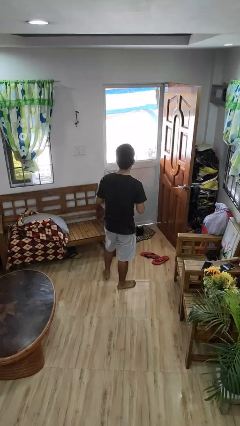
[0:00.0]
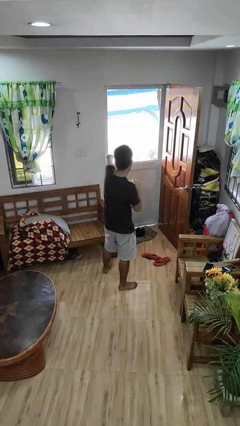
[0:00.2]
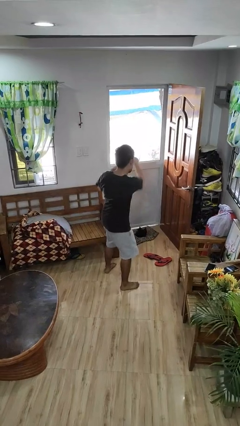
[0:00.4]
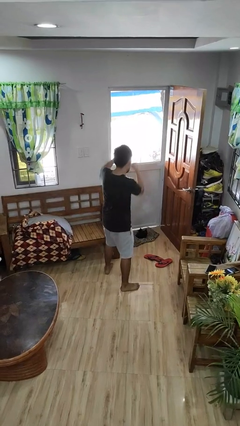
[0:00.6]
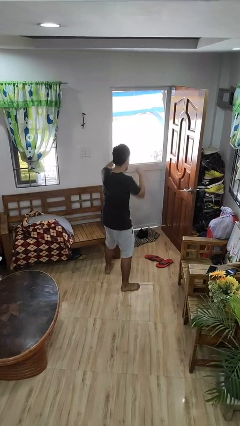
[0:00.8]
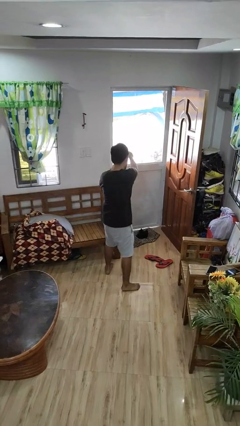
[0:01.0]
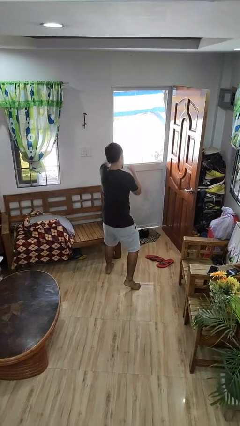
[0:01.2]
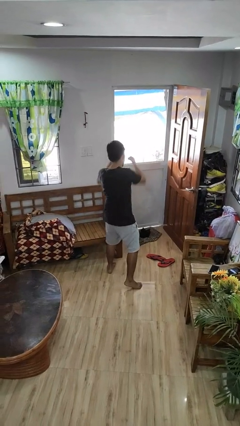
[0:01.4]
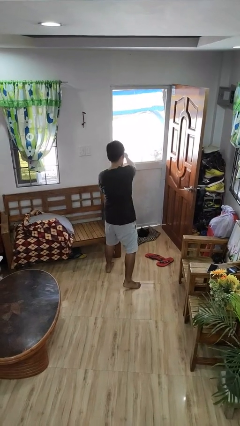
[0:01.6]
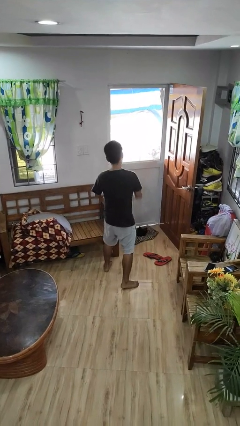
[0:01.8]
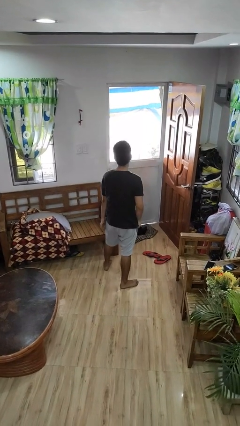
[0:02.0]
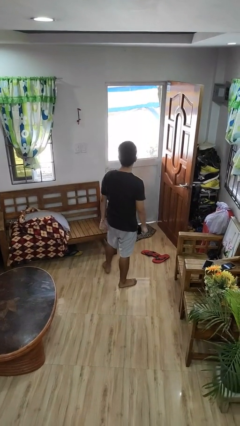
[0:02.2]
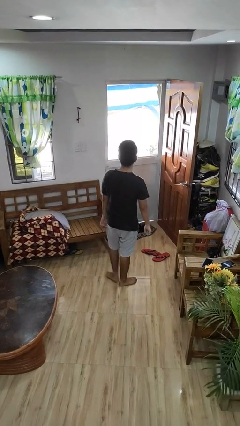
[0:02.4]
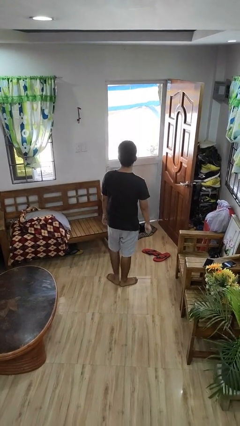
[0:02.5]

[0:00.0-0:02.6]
person punches

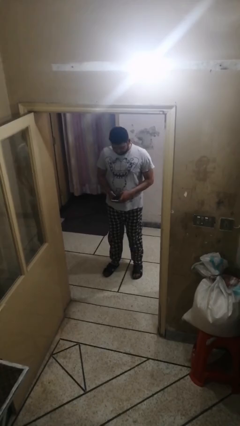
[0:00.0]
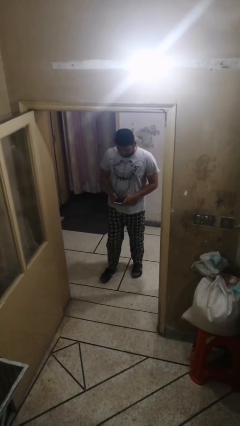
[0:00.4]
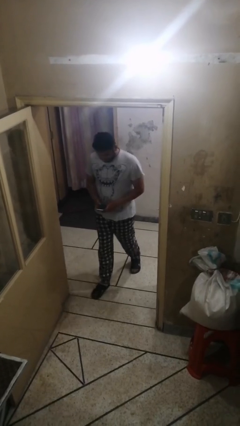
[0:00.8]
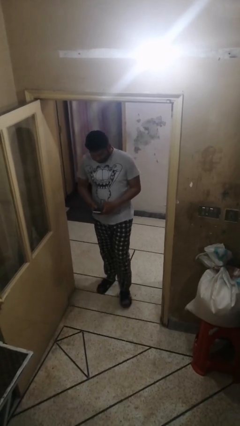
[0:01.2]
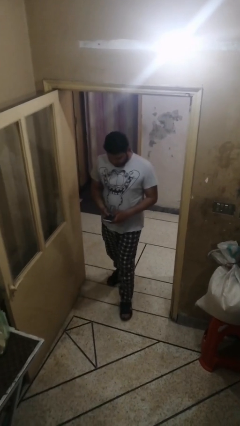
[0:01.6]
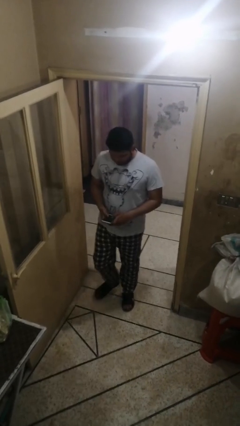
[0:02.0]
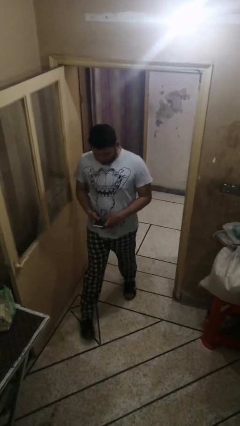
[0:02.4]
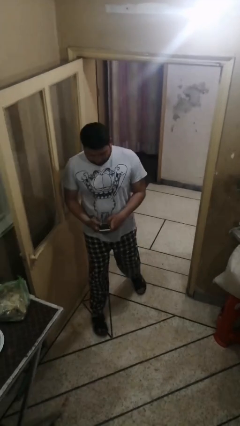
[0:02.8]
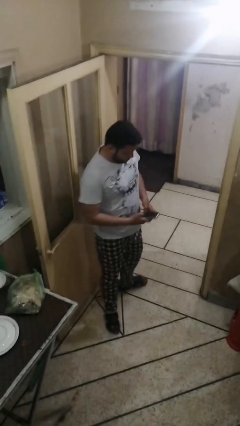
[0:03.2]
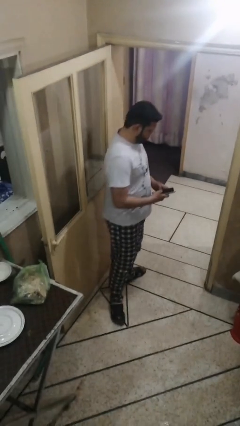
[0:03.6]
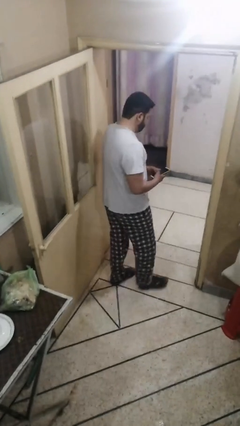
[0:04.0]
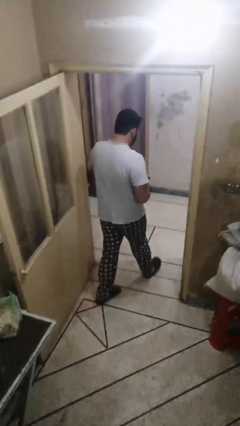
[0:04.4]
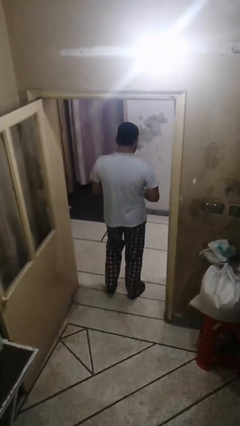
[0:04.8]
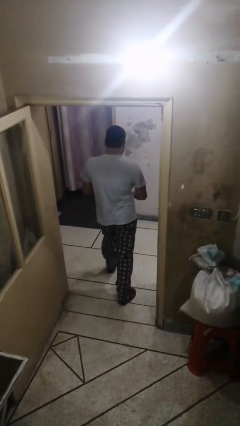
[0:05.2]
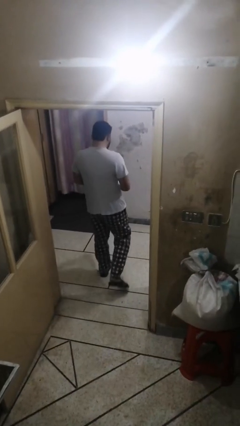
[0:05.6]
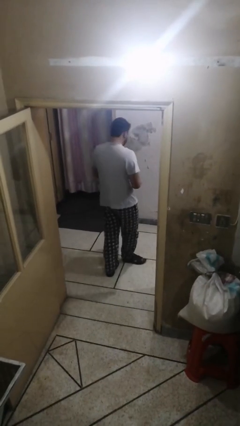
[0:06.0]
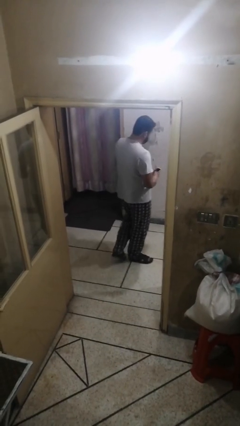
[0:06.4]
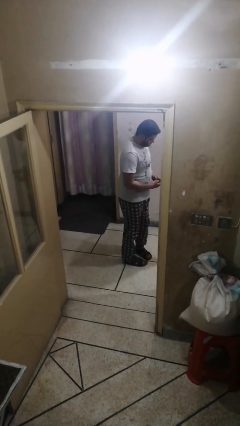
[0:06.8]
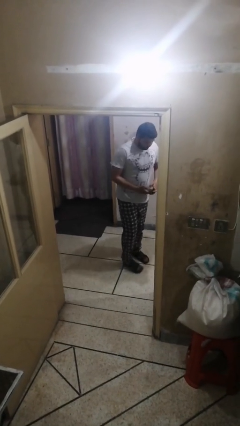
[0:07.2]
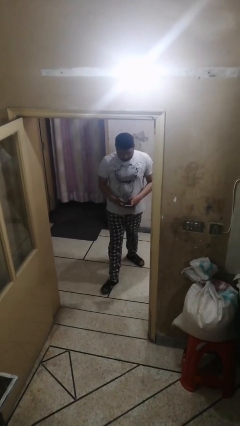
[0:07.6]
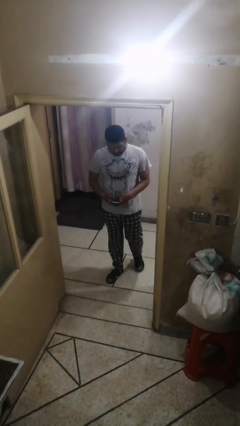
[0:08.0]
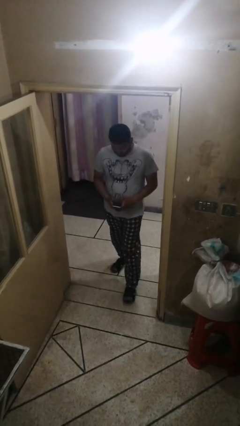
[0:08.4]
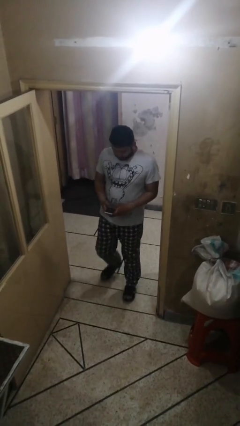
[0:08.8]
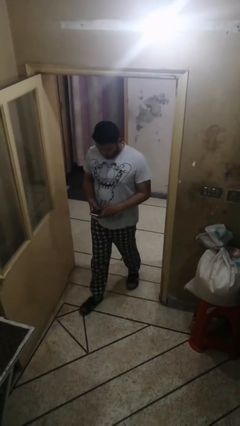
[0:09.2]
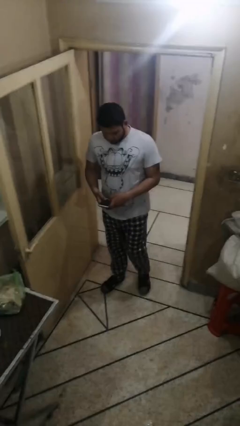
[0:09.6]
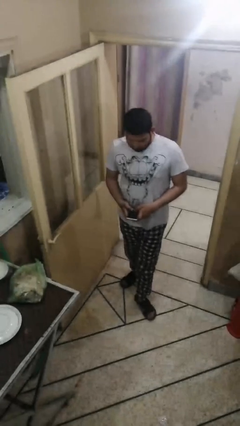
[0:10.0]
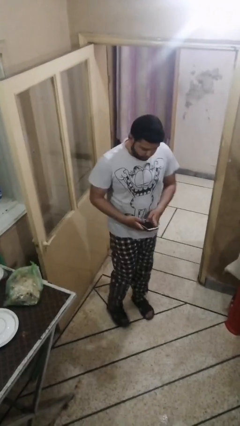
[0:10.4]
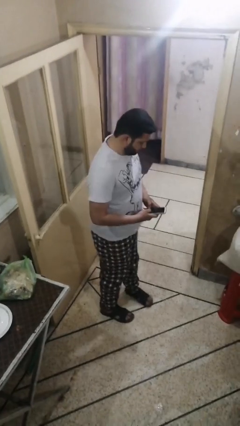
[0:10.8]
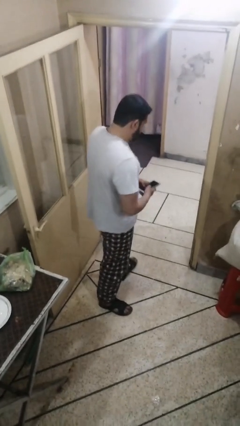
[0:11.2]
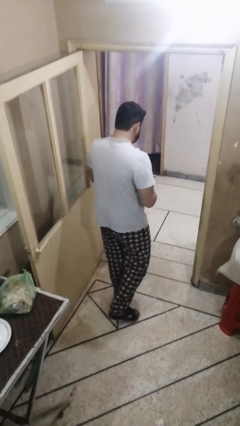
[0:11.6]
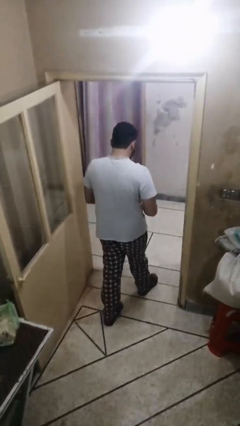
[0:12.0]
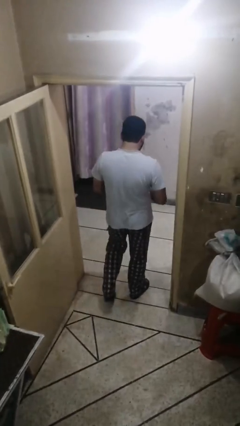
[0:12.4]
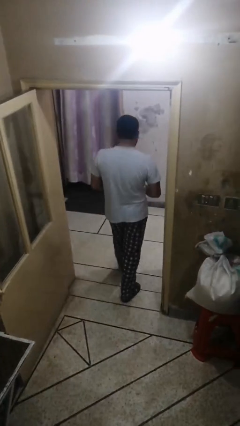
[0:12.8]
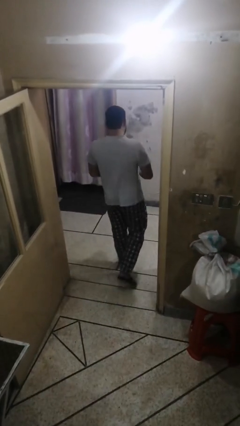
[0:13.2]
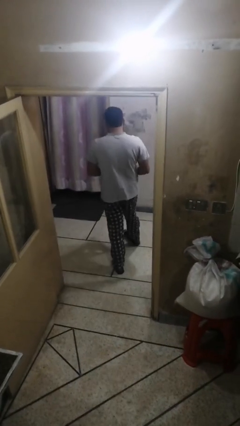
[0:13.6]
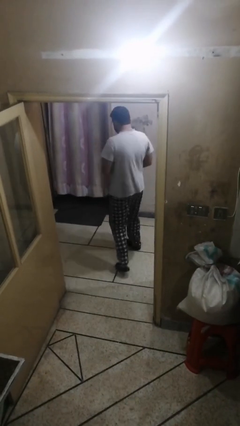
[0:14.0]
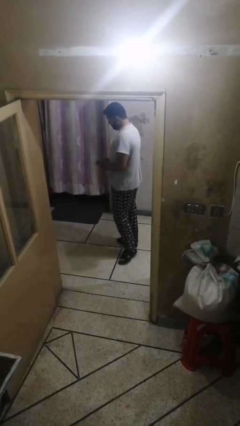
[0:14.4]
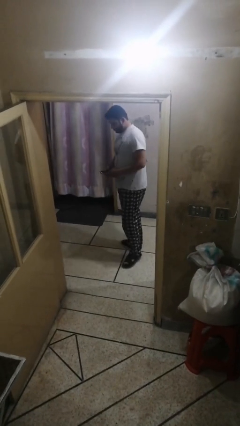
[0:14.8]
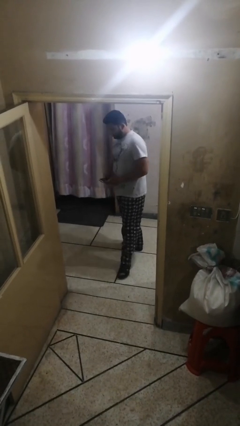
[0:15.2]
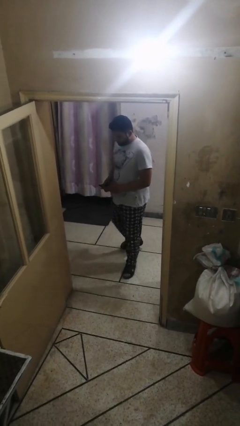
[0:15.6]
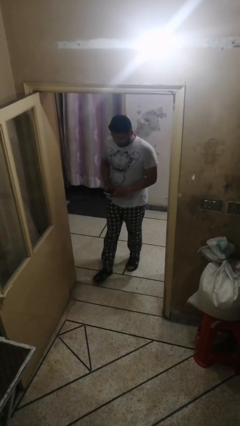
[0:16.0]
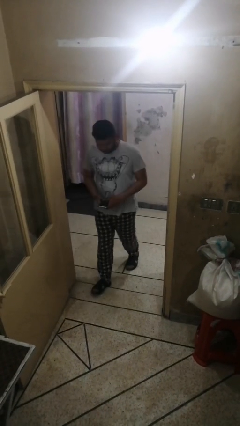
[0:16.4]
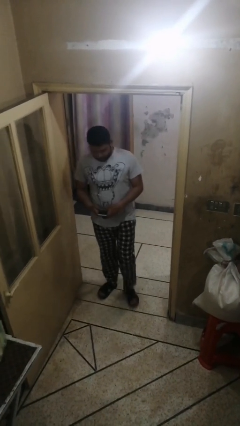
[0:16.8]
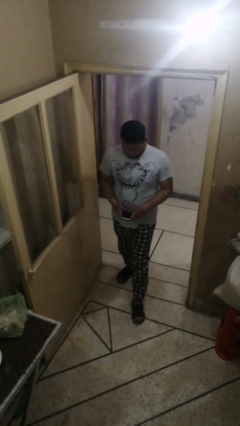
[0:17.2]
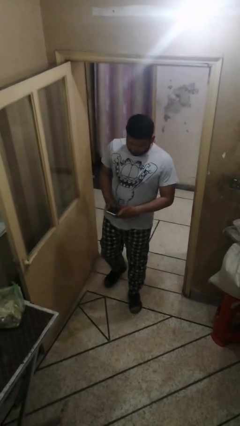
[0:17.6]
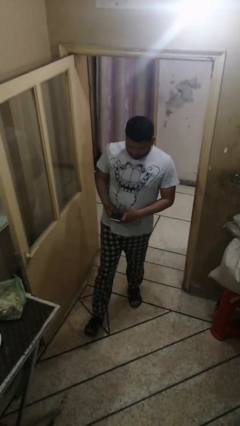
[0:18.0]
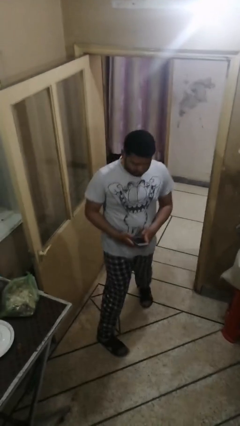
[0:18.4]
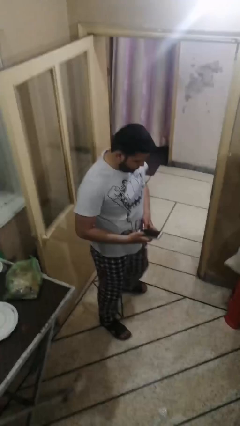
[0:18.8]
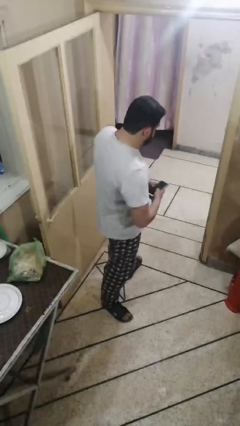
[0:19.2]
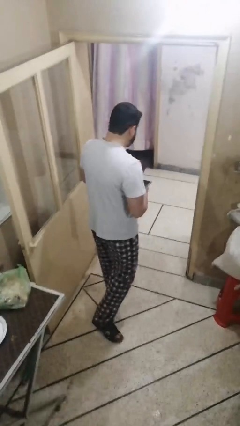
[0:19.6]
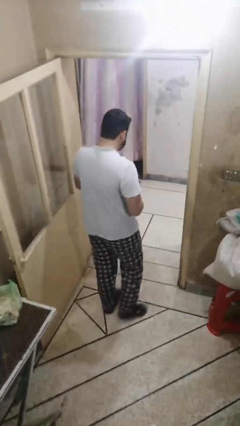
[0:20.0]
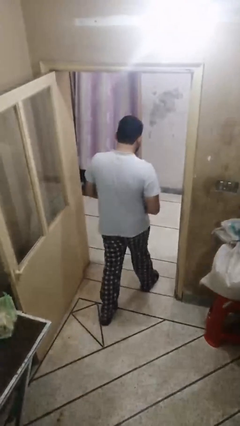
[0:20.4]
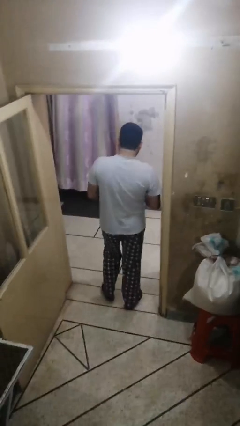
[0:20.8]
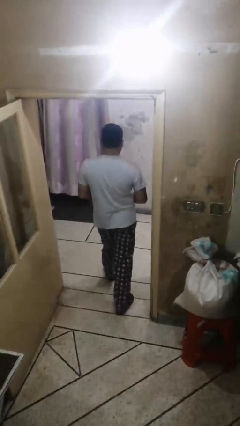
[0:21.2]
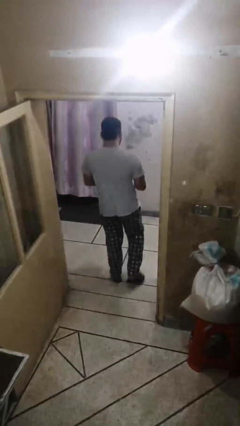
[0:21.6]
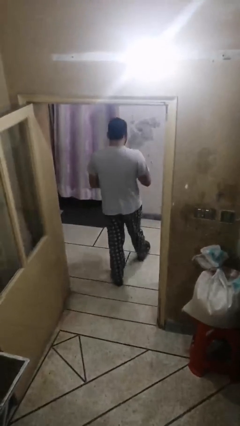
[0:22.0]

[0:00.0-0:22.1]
person texts on phone

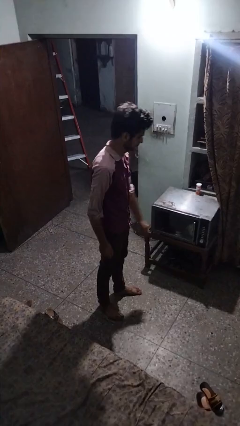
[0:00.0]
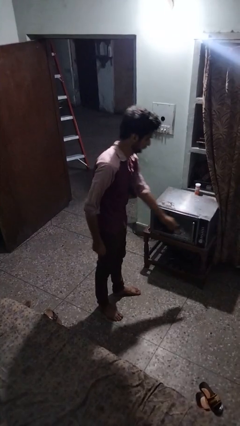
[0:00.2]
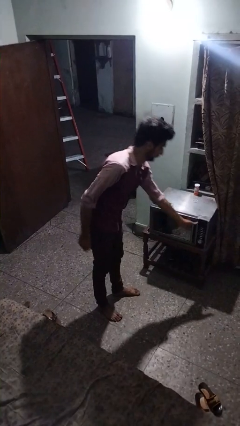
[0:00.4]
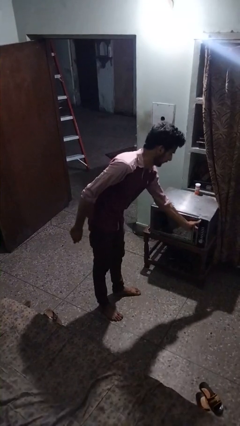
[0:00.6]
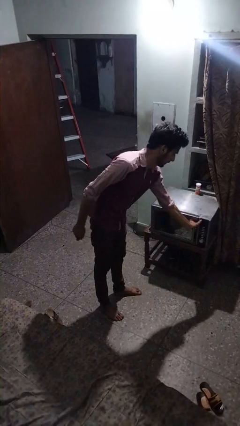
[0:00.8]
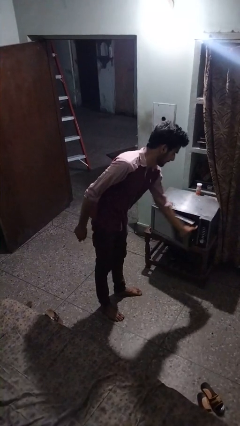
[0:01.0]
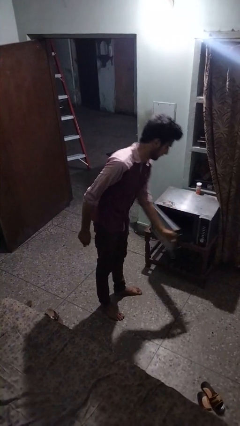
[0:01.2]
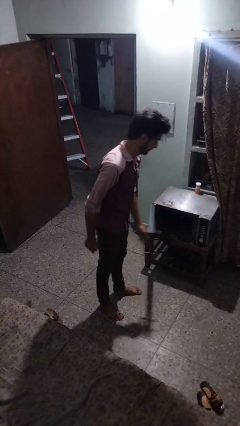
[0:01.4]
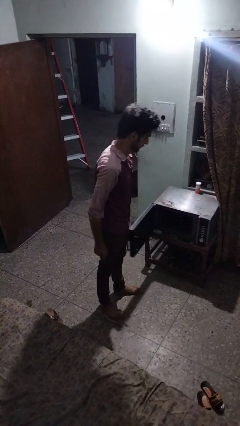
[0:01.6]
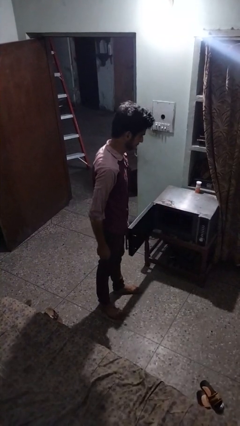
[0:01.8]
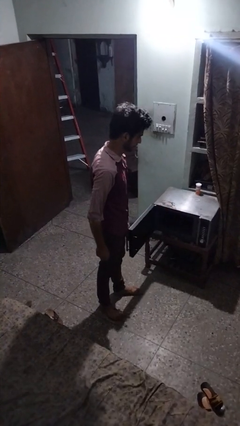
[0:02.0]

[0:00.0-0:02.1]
person opens microwave

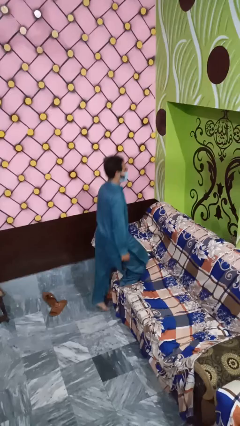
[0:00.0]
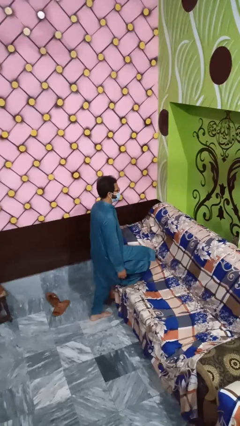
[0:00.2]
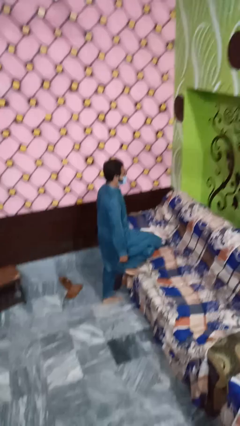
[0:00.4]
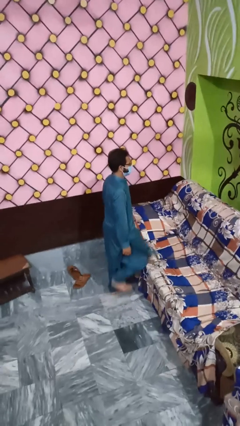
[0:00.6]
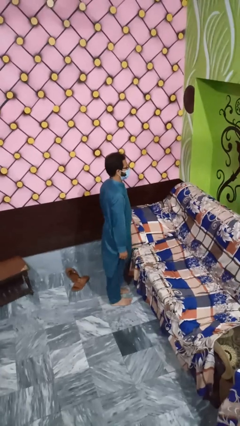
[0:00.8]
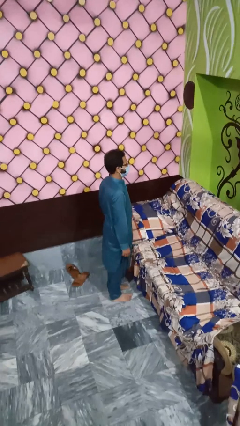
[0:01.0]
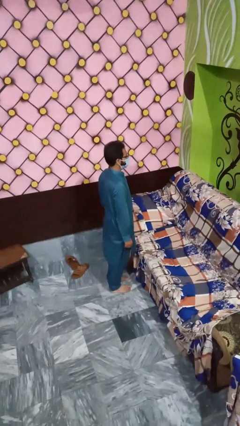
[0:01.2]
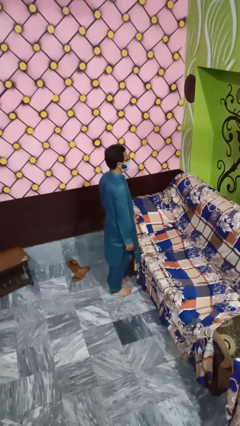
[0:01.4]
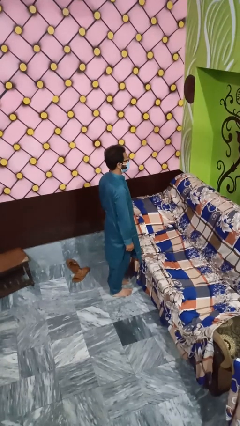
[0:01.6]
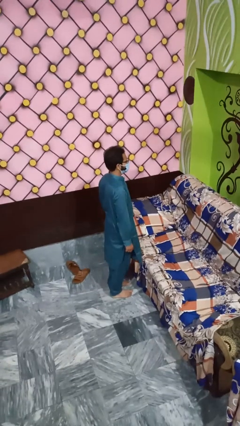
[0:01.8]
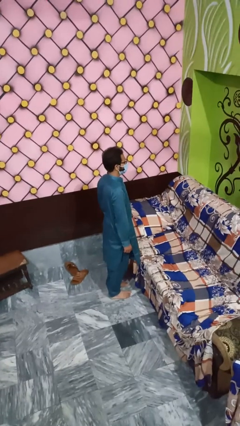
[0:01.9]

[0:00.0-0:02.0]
person climbs off couch

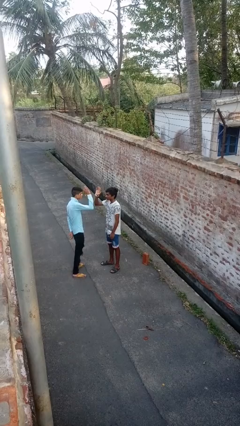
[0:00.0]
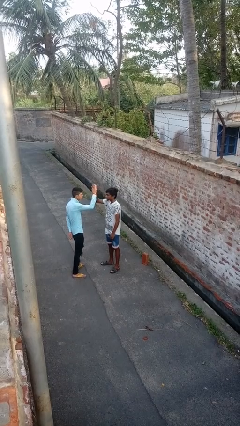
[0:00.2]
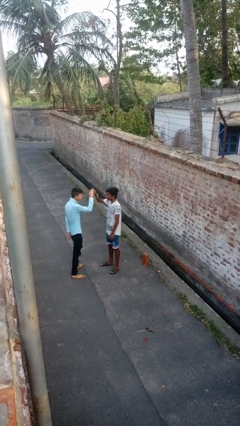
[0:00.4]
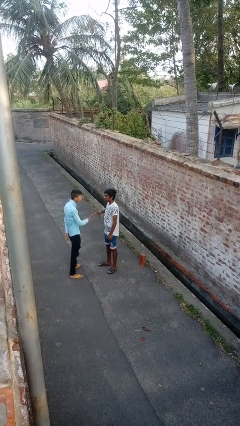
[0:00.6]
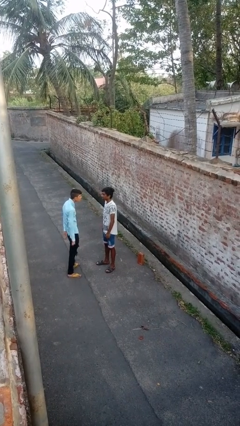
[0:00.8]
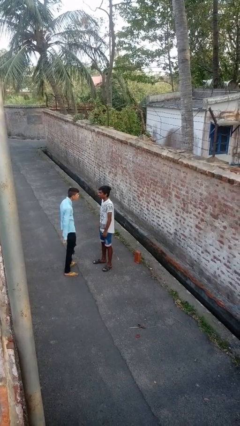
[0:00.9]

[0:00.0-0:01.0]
person highfives hand
